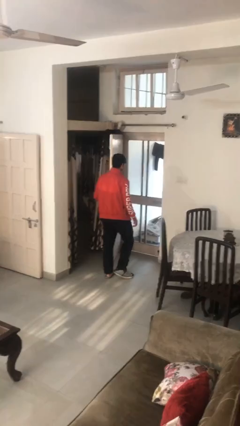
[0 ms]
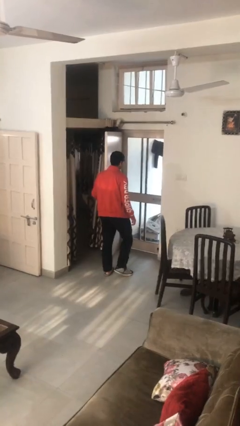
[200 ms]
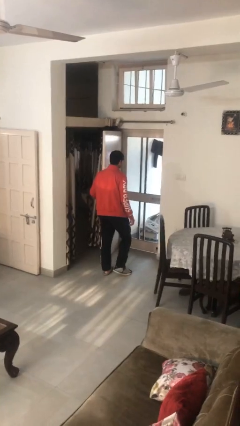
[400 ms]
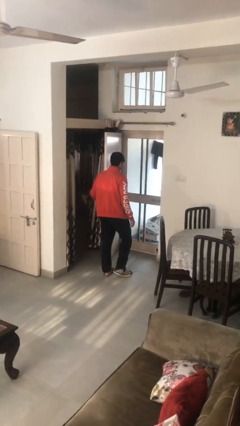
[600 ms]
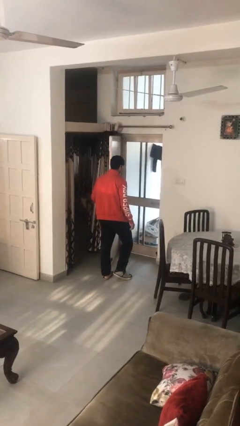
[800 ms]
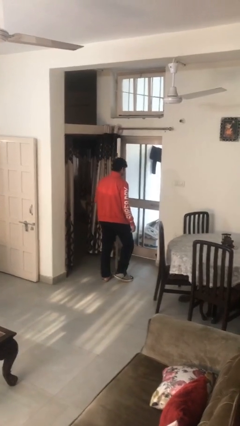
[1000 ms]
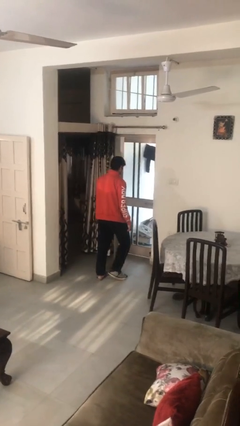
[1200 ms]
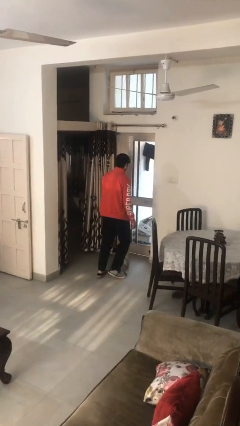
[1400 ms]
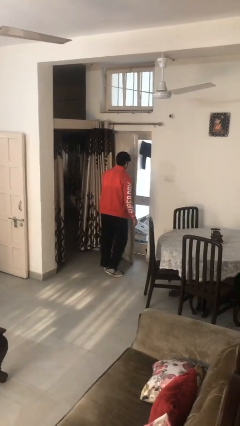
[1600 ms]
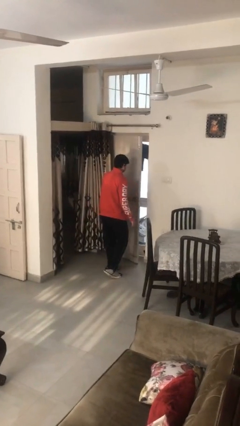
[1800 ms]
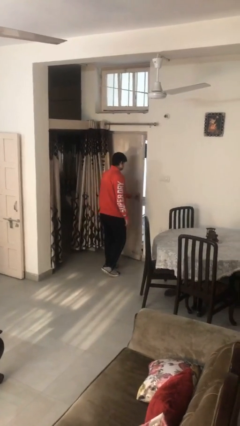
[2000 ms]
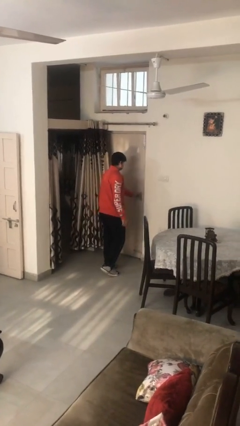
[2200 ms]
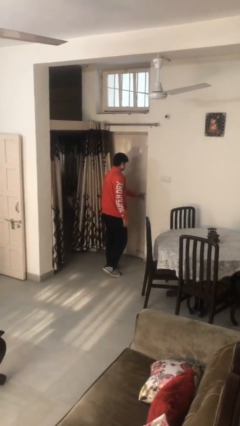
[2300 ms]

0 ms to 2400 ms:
person closes facility door

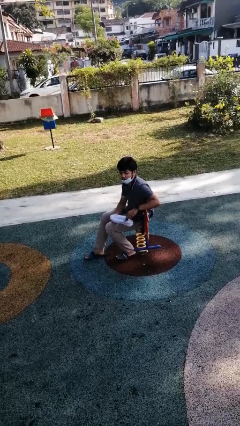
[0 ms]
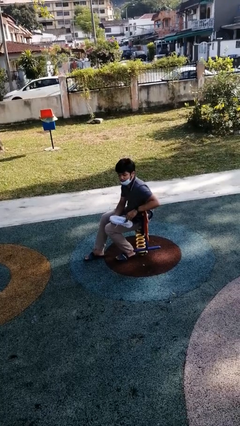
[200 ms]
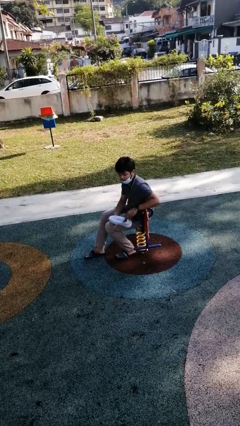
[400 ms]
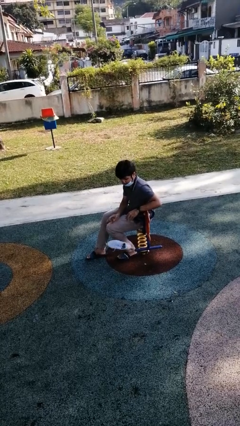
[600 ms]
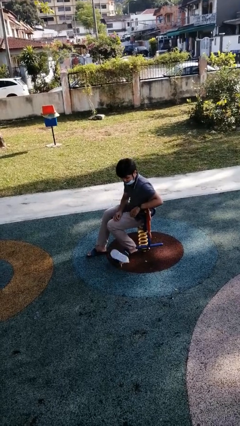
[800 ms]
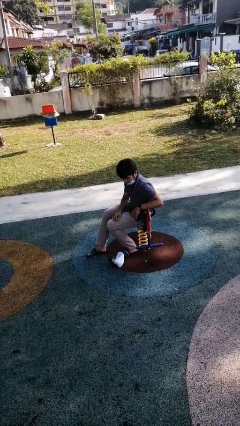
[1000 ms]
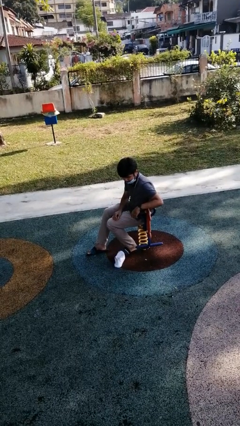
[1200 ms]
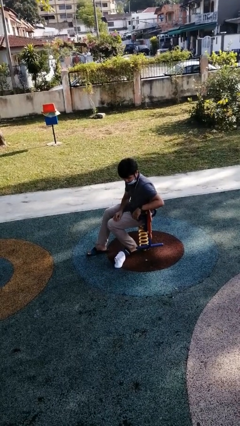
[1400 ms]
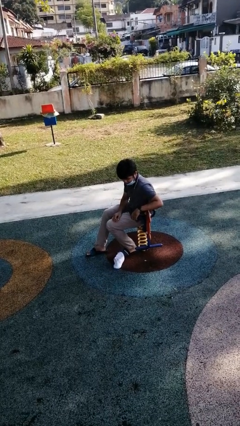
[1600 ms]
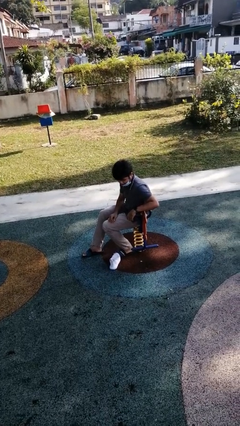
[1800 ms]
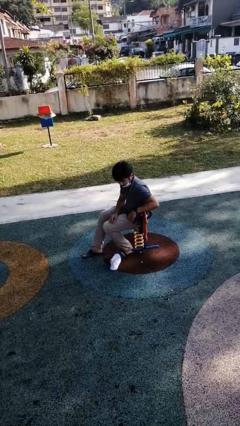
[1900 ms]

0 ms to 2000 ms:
person drops object

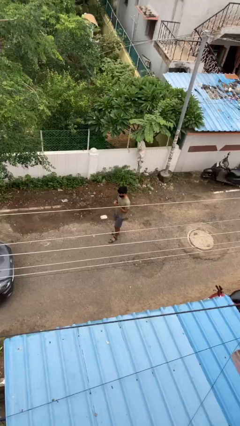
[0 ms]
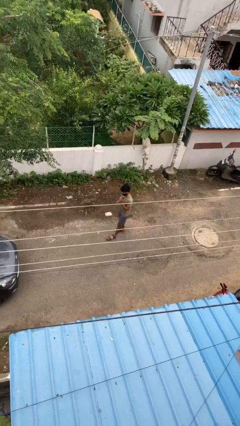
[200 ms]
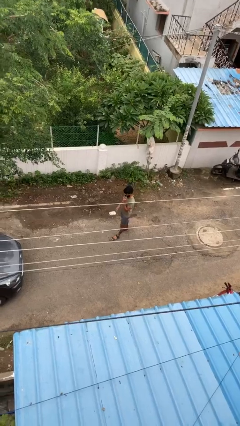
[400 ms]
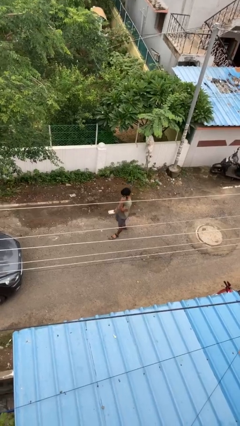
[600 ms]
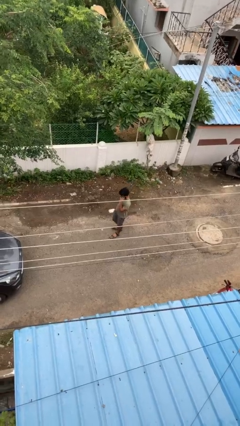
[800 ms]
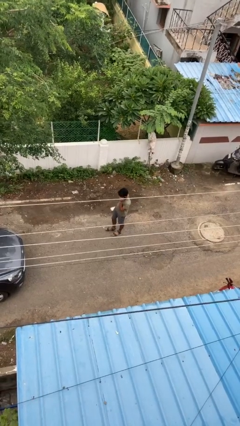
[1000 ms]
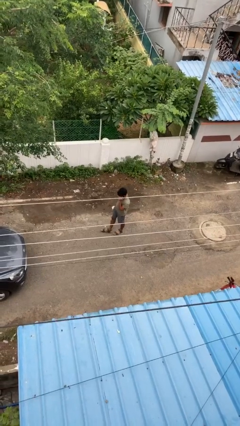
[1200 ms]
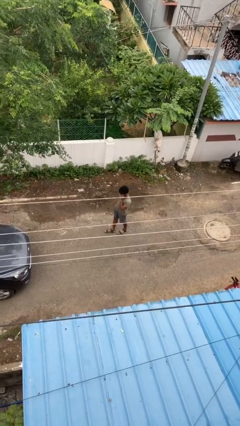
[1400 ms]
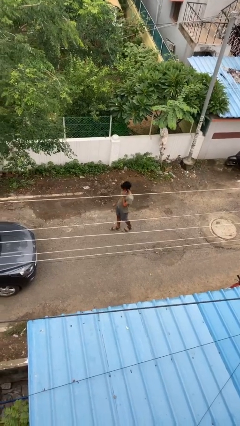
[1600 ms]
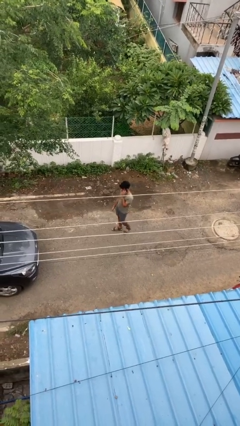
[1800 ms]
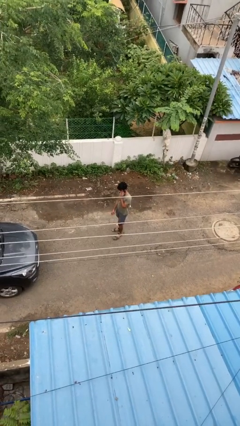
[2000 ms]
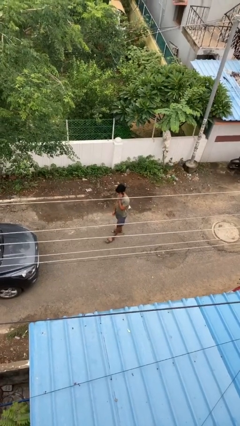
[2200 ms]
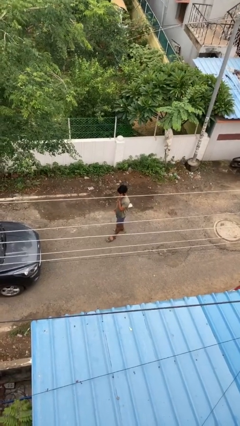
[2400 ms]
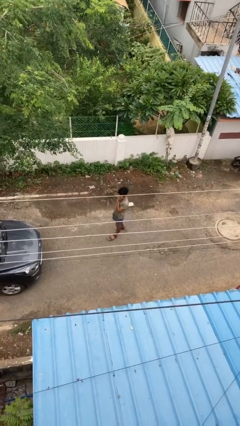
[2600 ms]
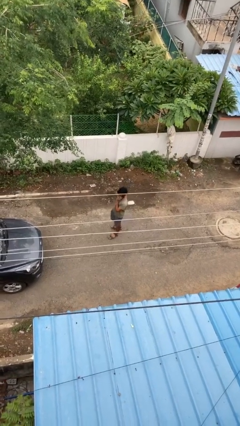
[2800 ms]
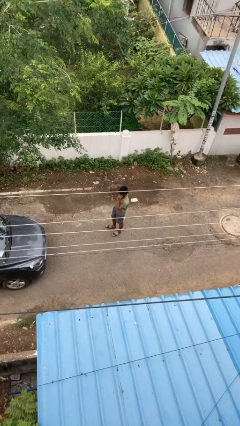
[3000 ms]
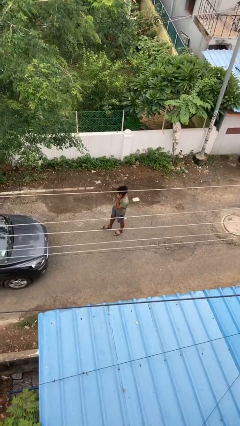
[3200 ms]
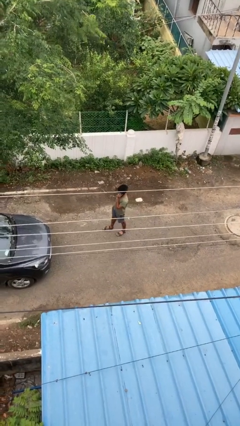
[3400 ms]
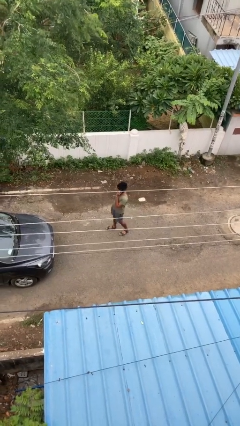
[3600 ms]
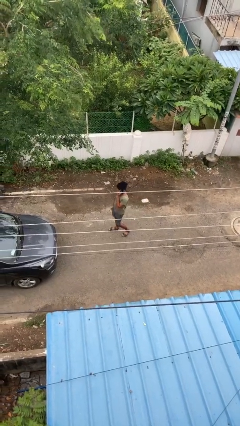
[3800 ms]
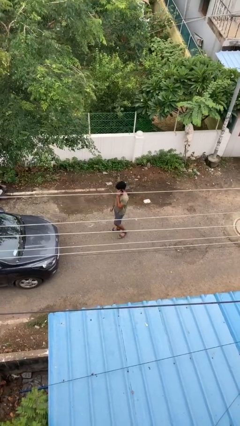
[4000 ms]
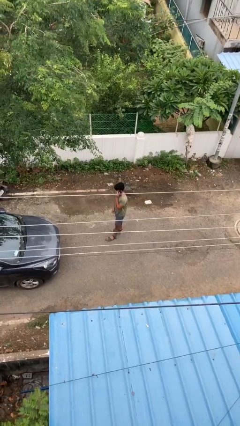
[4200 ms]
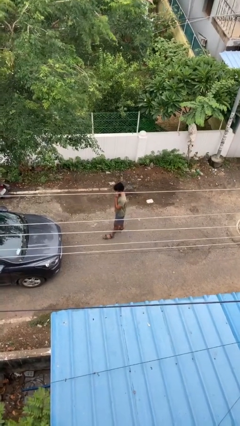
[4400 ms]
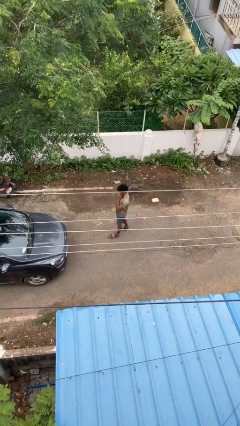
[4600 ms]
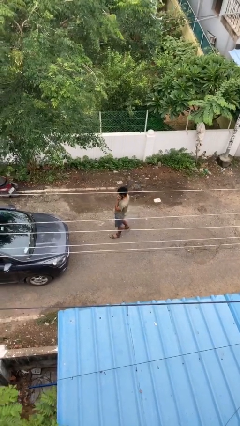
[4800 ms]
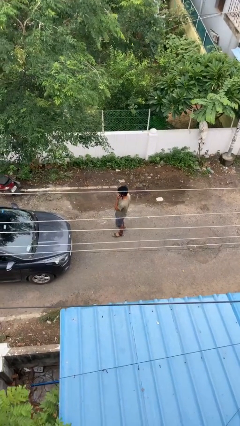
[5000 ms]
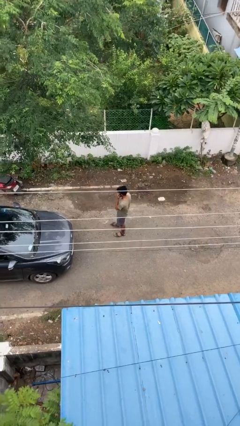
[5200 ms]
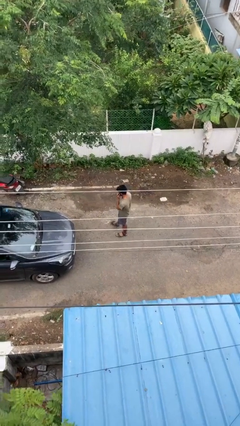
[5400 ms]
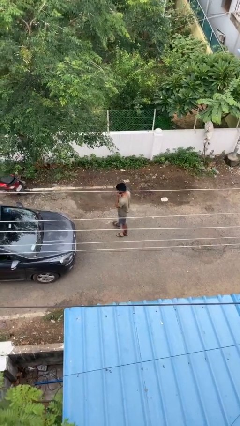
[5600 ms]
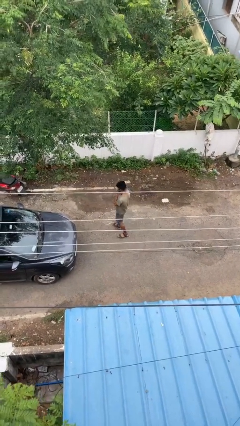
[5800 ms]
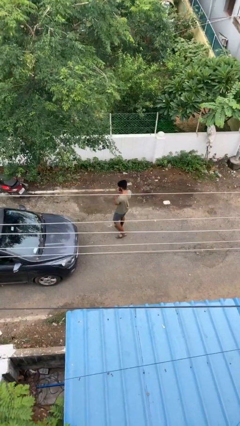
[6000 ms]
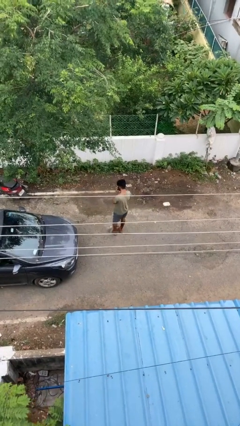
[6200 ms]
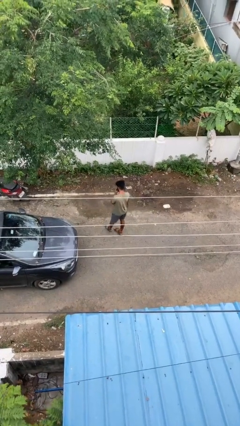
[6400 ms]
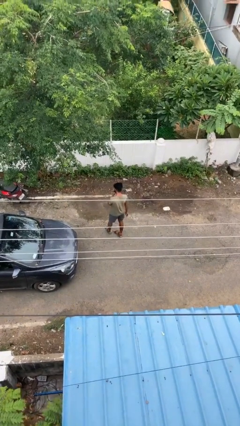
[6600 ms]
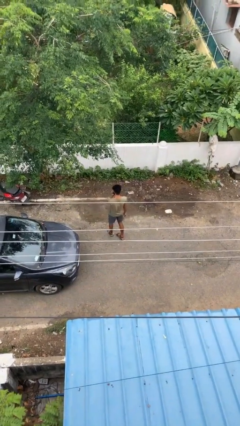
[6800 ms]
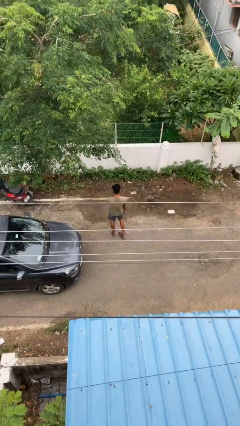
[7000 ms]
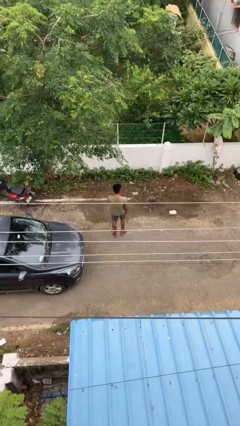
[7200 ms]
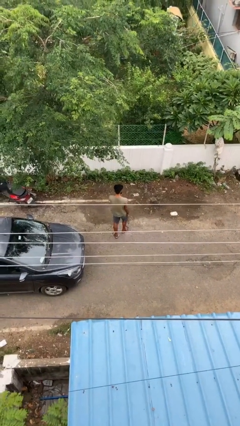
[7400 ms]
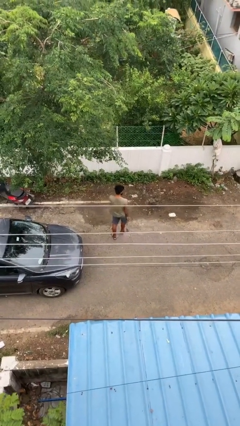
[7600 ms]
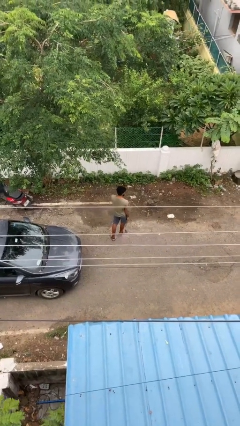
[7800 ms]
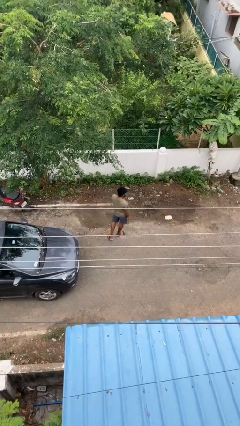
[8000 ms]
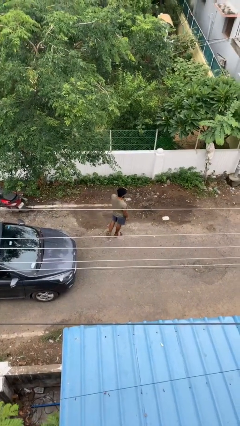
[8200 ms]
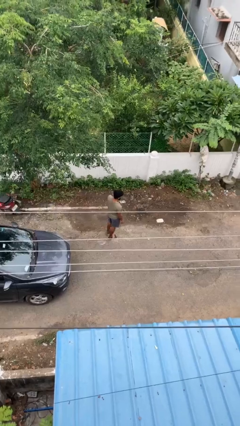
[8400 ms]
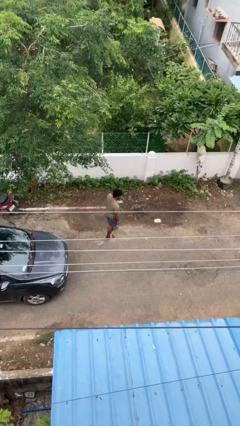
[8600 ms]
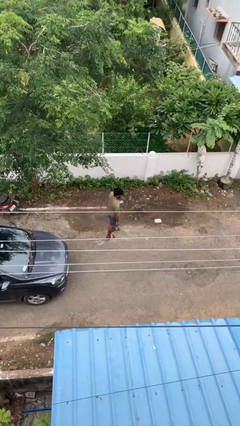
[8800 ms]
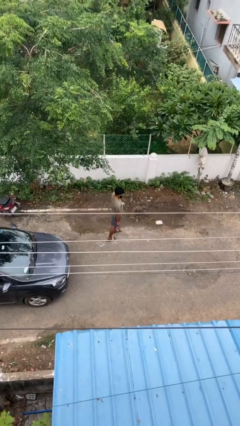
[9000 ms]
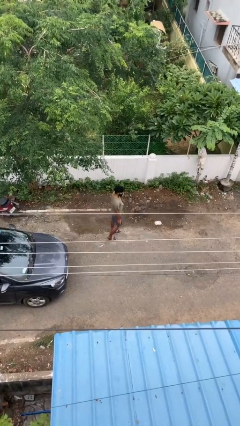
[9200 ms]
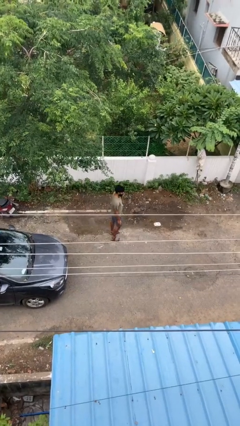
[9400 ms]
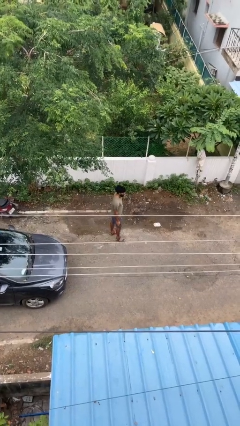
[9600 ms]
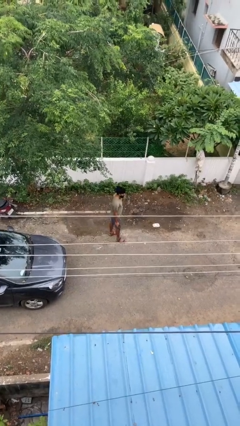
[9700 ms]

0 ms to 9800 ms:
person talks on phone

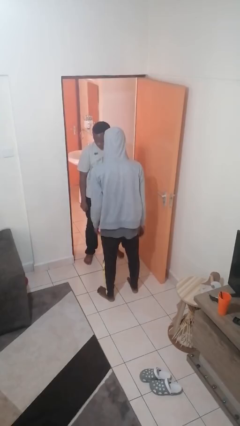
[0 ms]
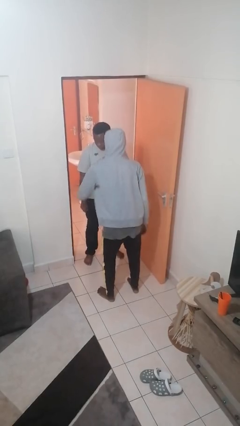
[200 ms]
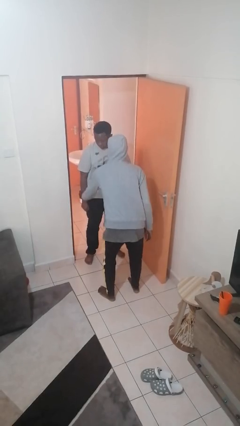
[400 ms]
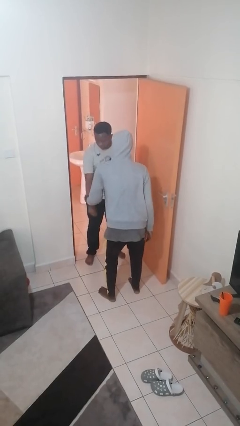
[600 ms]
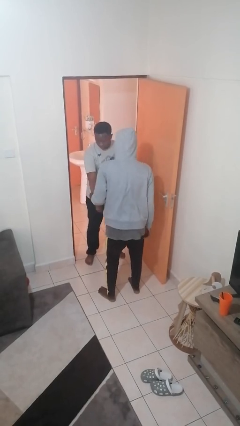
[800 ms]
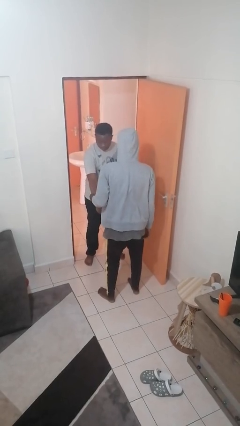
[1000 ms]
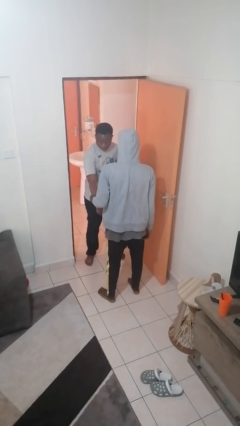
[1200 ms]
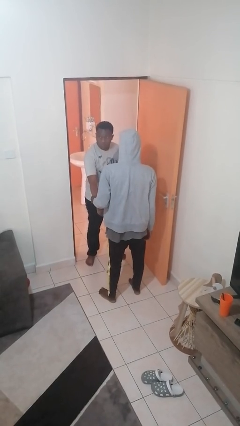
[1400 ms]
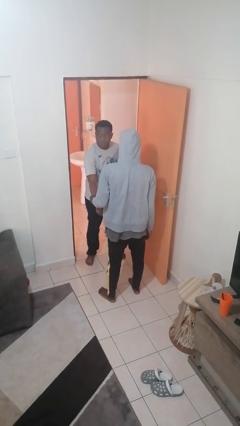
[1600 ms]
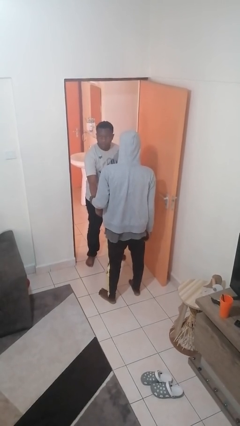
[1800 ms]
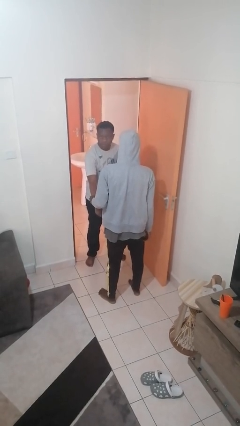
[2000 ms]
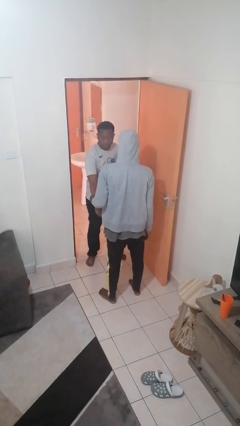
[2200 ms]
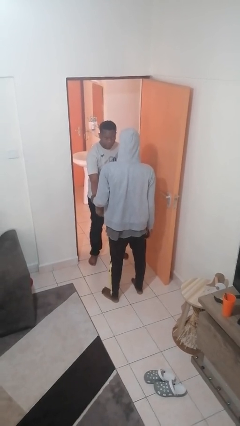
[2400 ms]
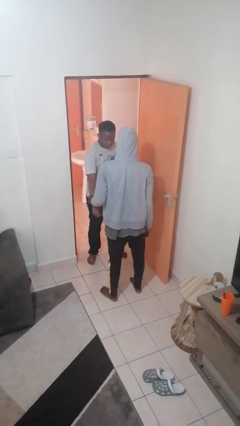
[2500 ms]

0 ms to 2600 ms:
person grabs person by forearm

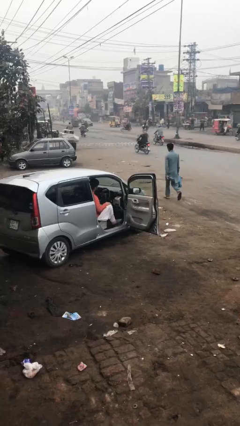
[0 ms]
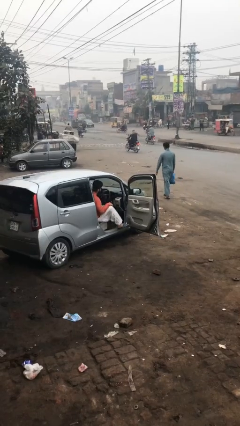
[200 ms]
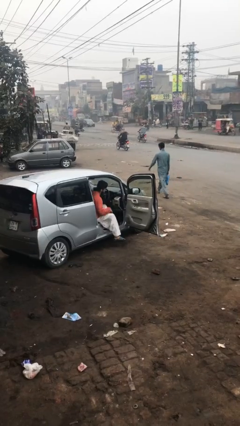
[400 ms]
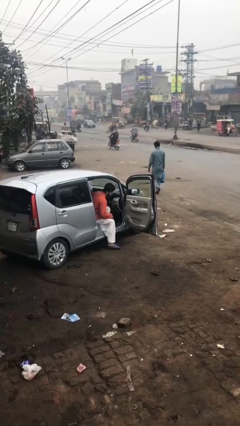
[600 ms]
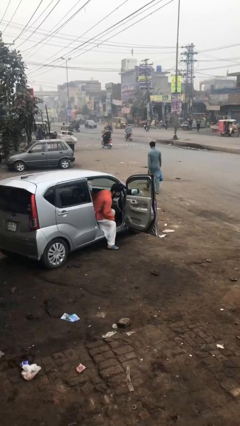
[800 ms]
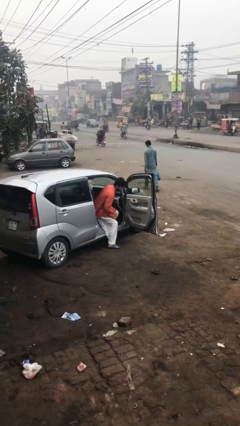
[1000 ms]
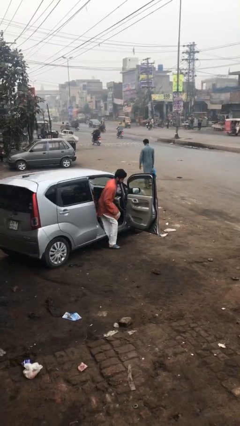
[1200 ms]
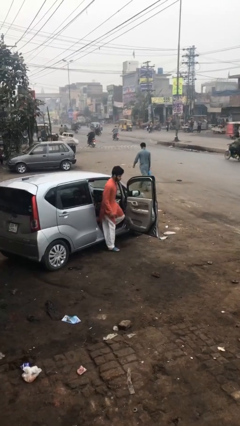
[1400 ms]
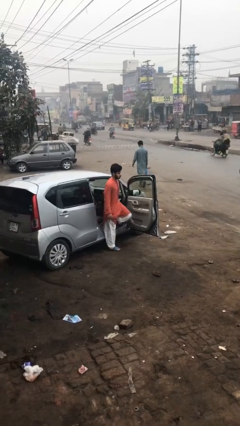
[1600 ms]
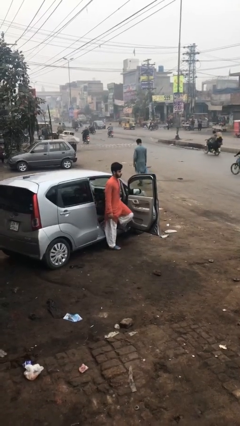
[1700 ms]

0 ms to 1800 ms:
person exits car
